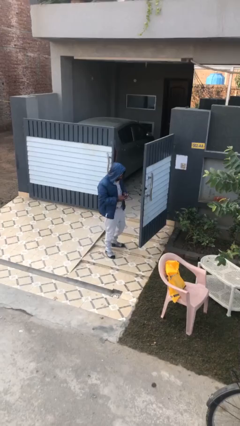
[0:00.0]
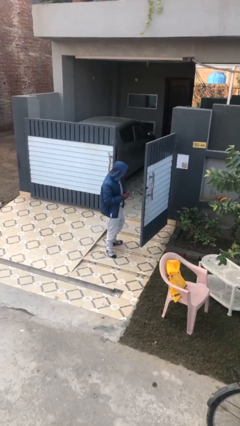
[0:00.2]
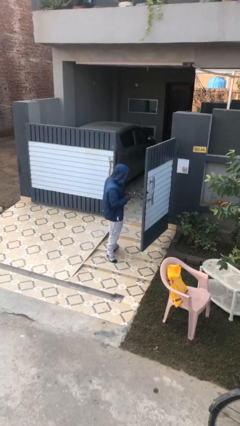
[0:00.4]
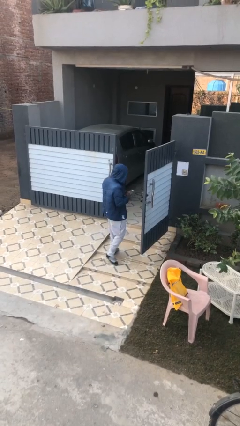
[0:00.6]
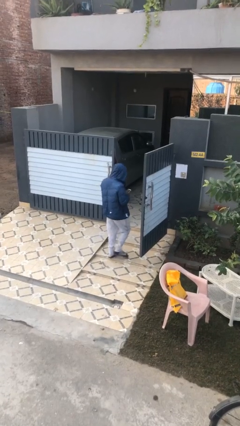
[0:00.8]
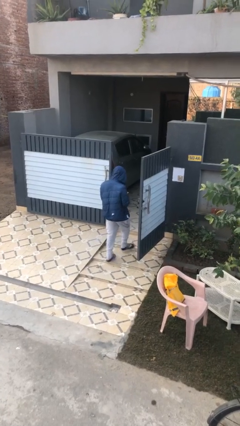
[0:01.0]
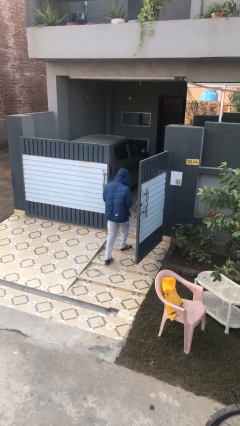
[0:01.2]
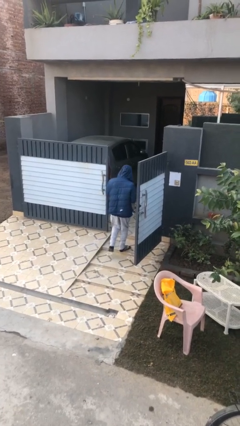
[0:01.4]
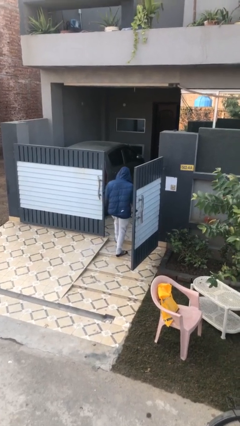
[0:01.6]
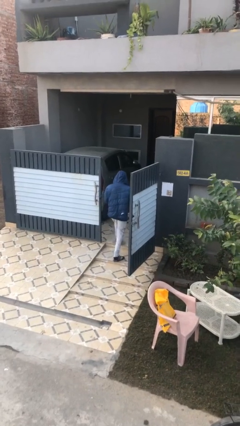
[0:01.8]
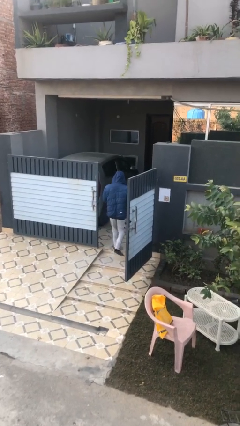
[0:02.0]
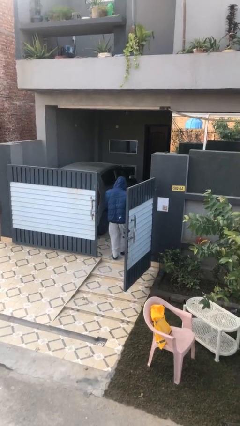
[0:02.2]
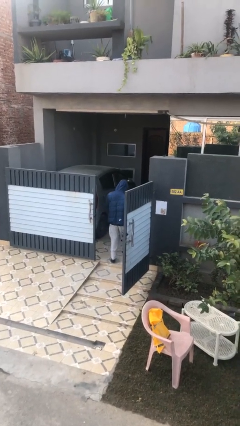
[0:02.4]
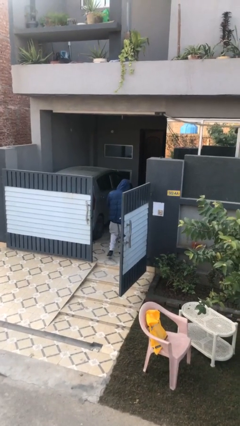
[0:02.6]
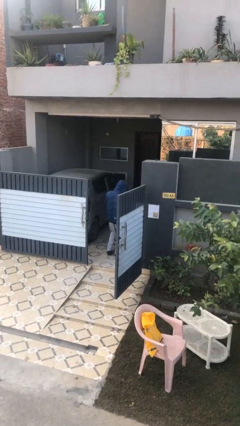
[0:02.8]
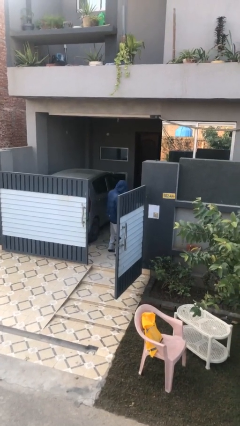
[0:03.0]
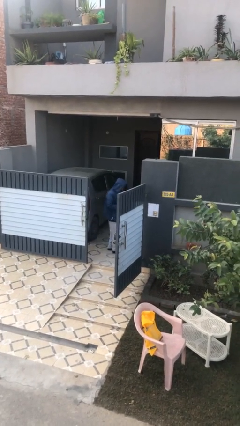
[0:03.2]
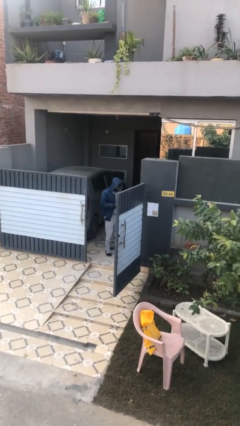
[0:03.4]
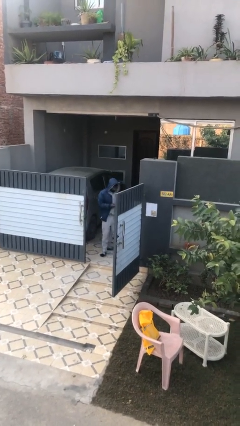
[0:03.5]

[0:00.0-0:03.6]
person exits scene through structure

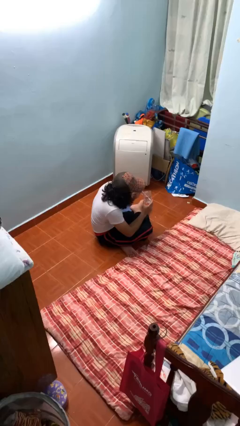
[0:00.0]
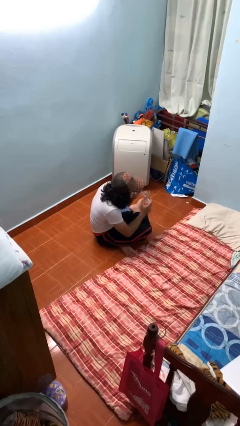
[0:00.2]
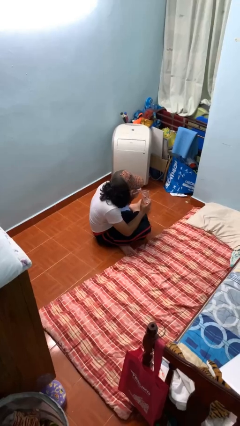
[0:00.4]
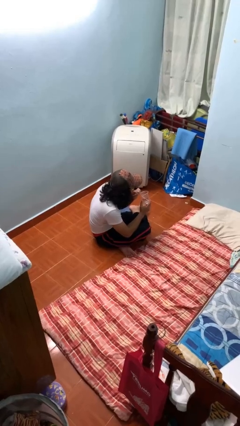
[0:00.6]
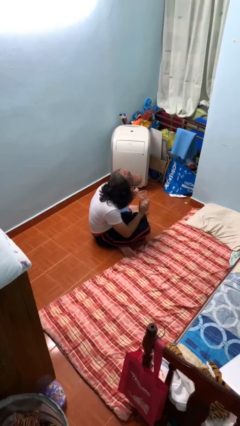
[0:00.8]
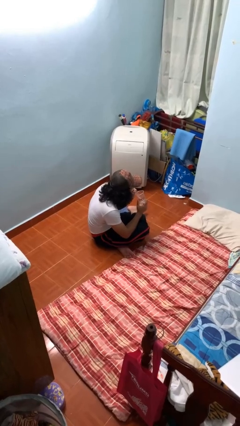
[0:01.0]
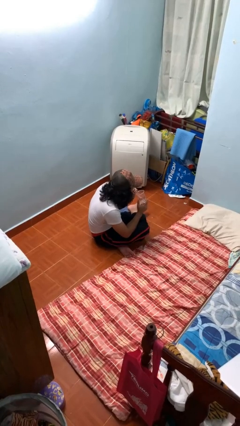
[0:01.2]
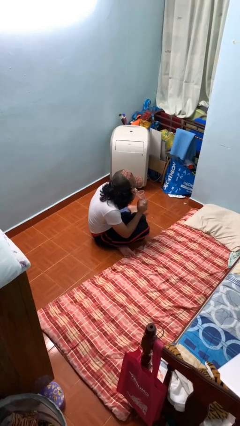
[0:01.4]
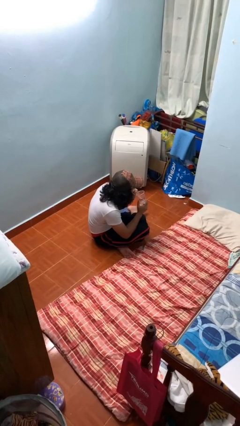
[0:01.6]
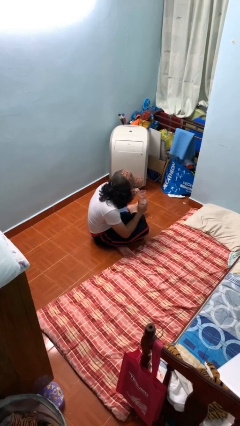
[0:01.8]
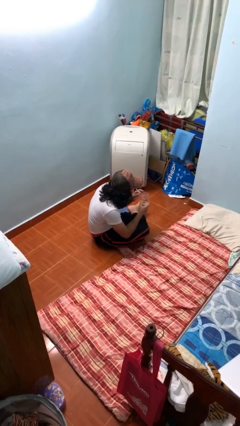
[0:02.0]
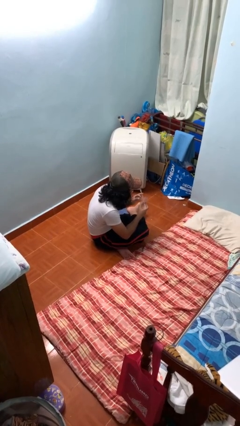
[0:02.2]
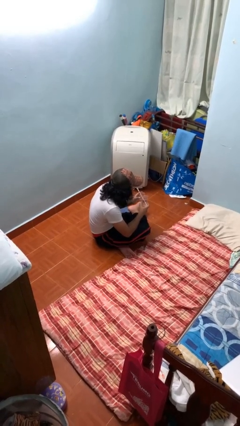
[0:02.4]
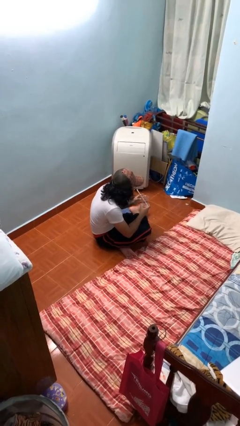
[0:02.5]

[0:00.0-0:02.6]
person drinks from straw

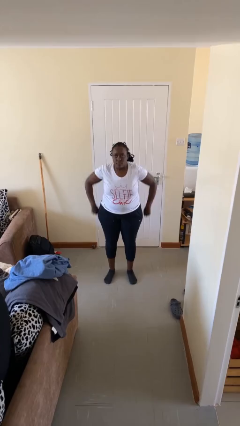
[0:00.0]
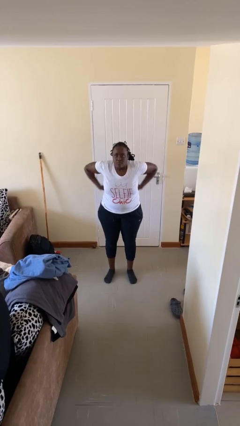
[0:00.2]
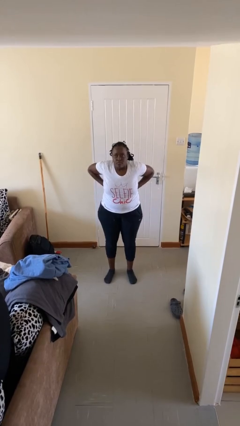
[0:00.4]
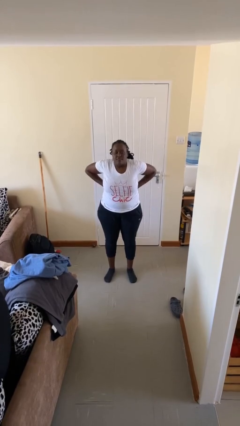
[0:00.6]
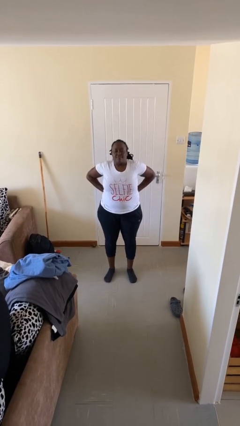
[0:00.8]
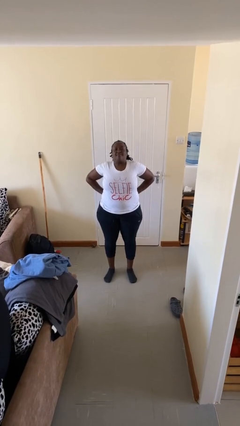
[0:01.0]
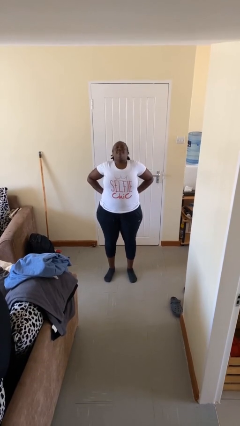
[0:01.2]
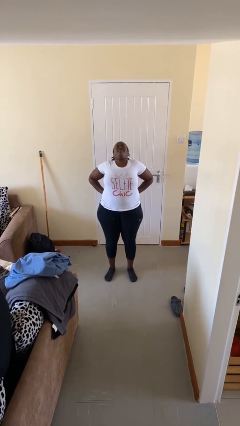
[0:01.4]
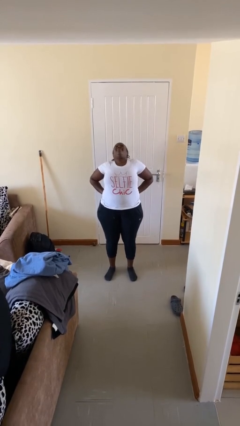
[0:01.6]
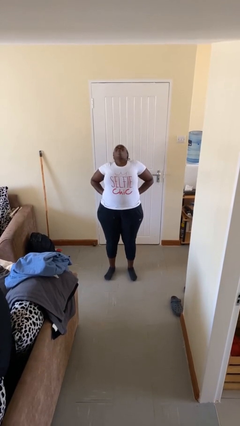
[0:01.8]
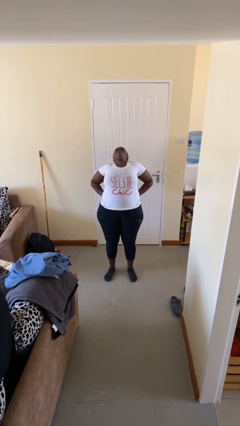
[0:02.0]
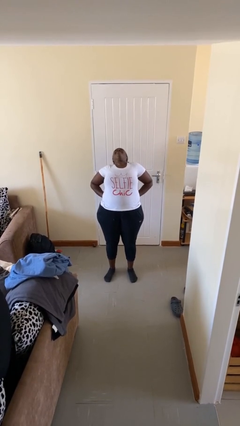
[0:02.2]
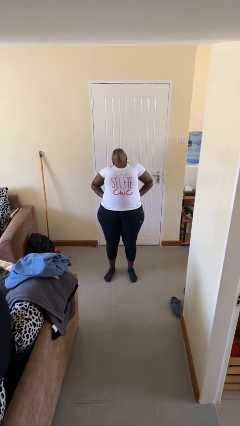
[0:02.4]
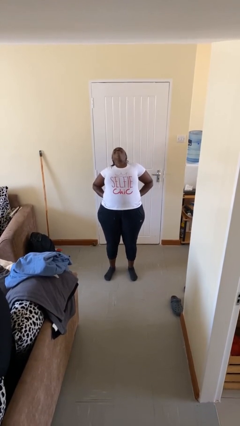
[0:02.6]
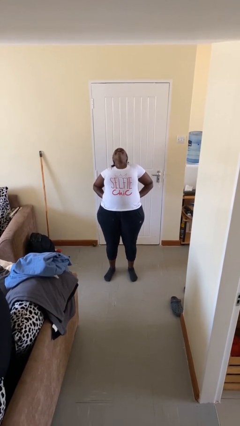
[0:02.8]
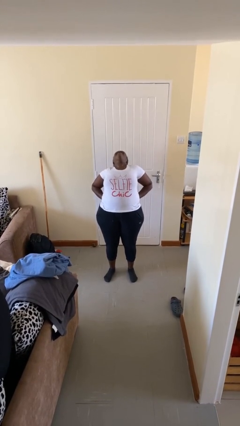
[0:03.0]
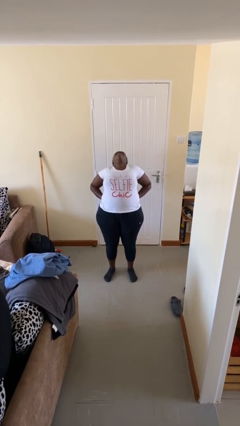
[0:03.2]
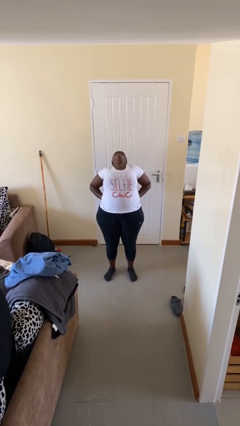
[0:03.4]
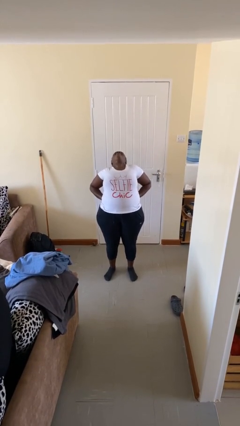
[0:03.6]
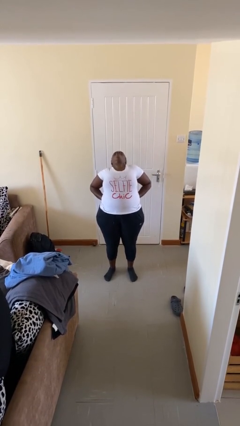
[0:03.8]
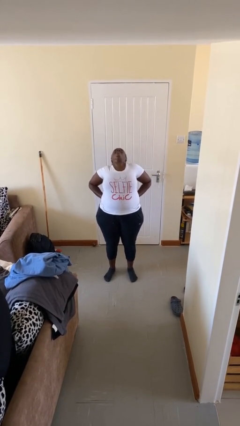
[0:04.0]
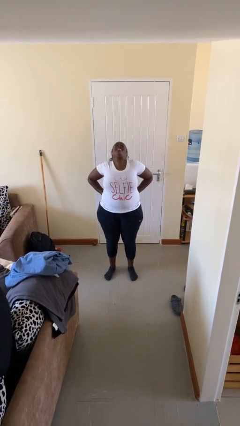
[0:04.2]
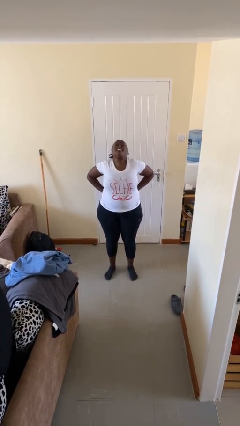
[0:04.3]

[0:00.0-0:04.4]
person stretches back

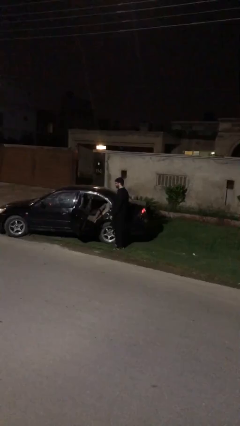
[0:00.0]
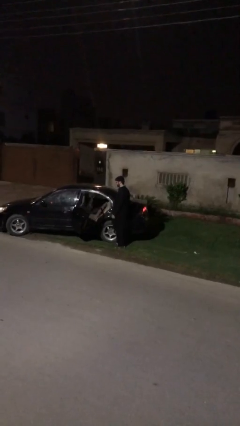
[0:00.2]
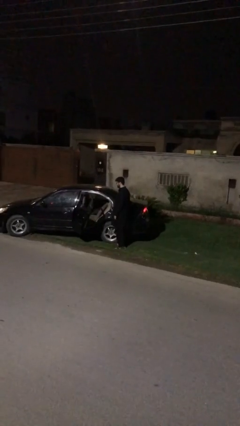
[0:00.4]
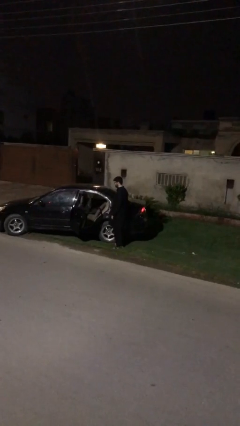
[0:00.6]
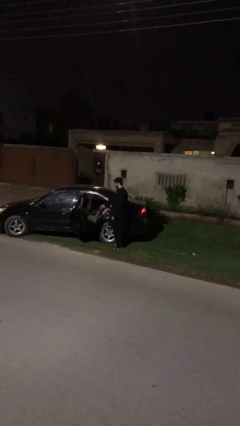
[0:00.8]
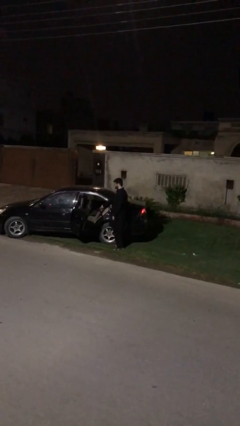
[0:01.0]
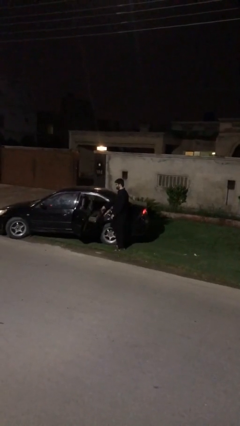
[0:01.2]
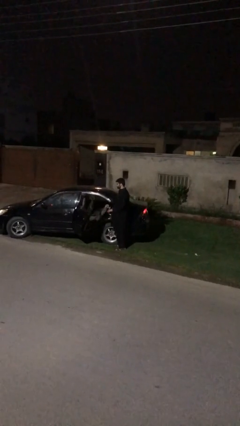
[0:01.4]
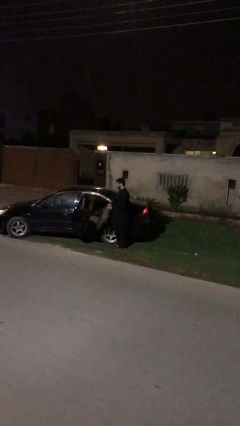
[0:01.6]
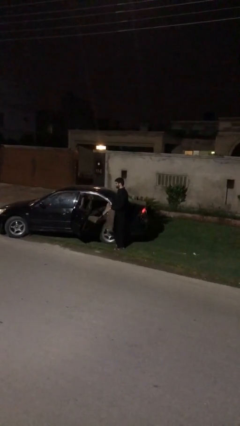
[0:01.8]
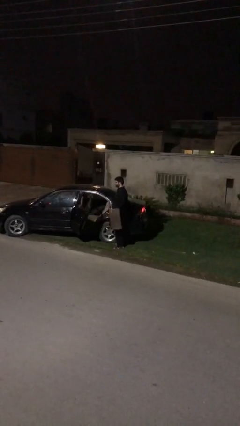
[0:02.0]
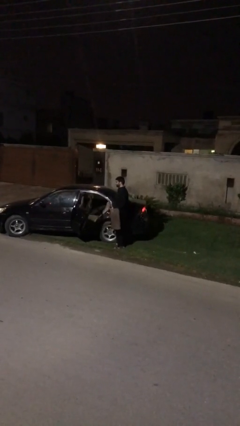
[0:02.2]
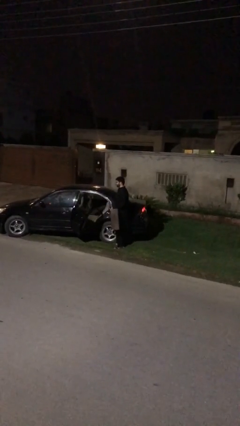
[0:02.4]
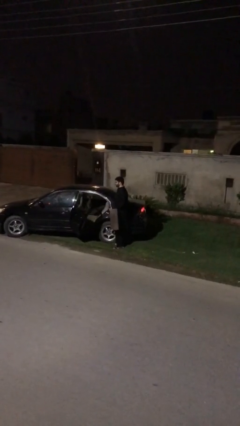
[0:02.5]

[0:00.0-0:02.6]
person unloads car

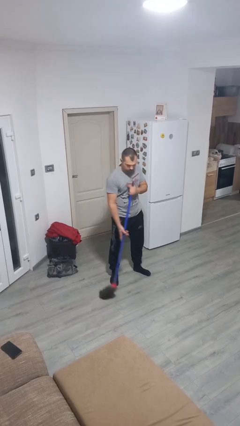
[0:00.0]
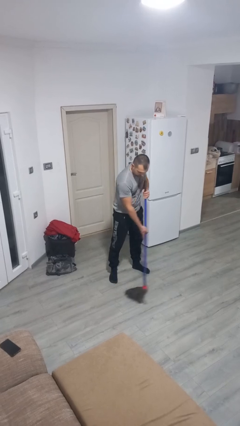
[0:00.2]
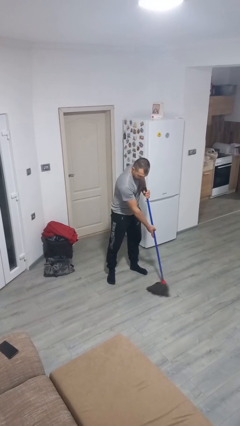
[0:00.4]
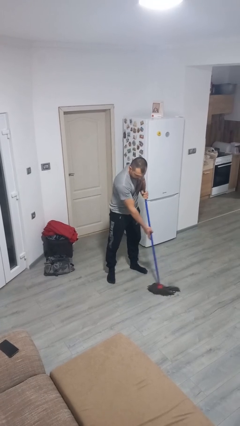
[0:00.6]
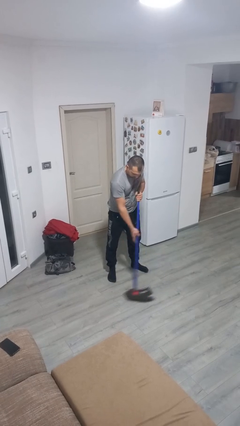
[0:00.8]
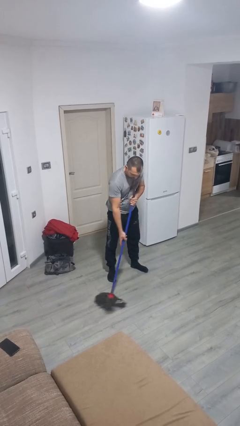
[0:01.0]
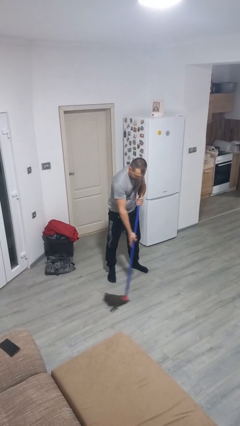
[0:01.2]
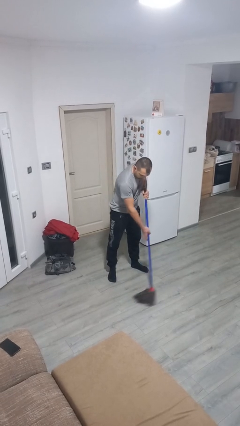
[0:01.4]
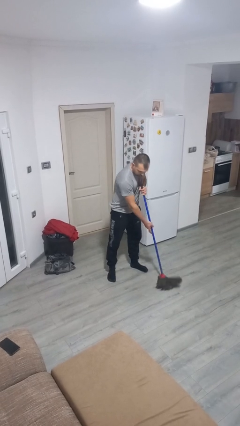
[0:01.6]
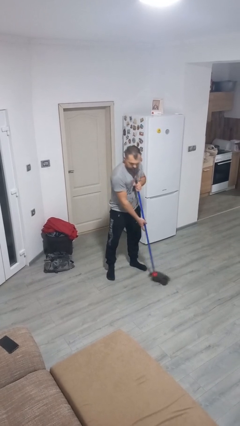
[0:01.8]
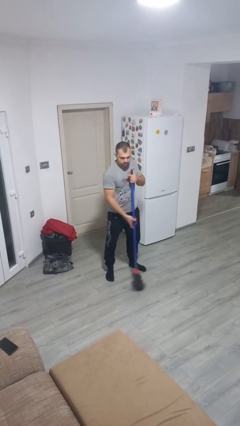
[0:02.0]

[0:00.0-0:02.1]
person mops

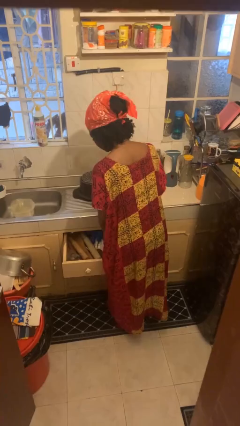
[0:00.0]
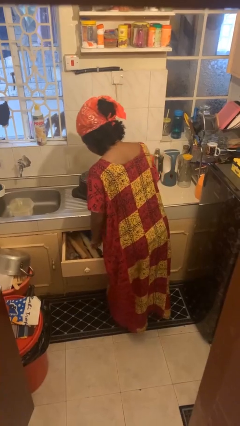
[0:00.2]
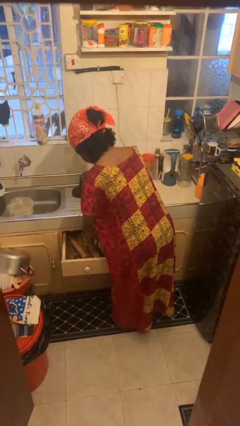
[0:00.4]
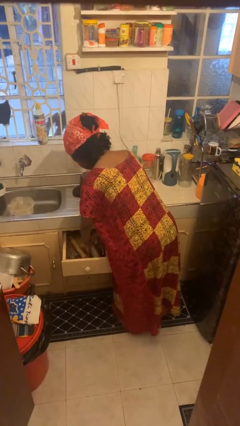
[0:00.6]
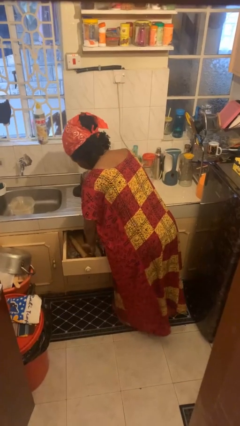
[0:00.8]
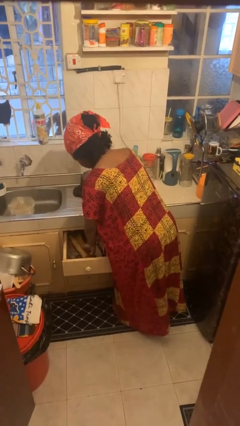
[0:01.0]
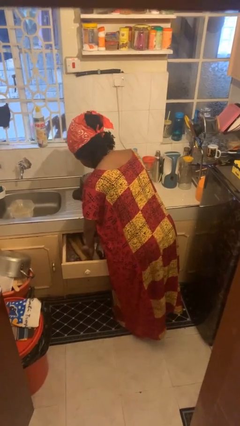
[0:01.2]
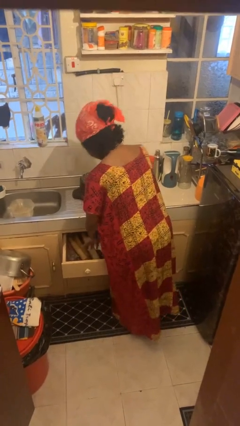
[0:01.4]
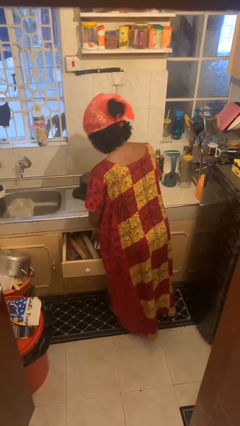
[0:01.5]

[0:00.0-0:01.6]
person searches in kitchen drawer

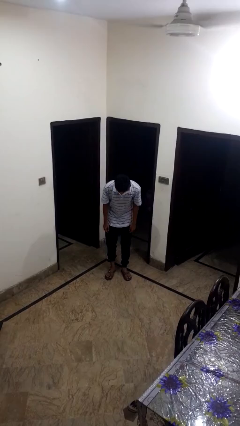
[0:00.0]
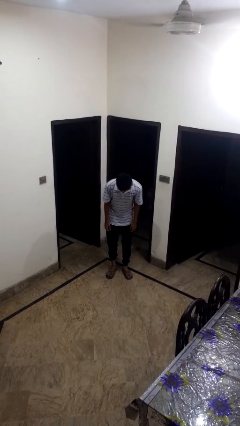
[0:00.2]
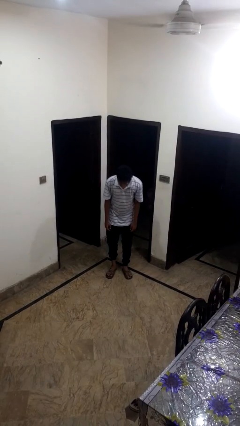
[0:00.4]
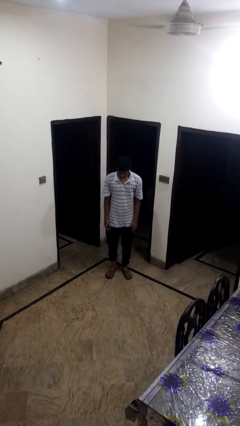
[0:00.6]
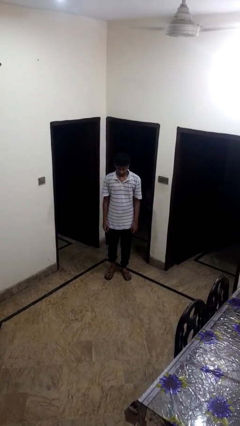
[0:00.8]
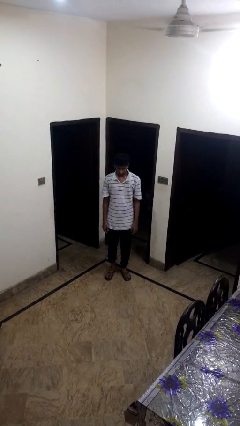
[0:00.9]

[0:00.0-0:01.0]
person bows
